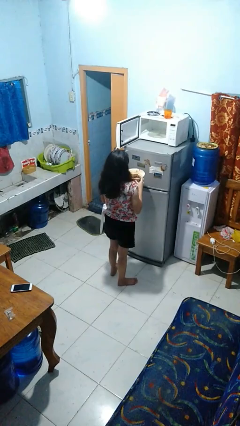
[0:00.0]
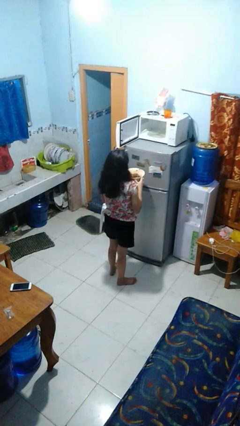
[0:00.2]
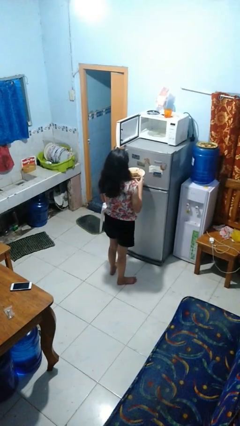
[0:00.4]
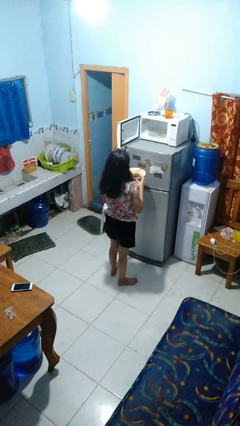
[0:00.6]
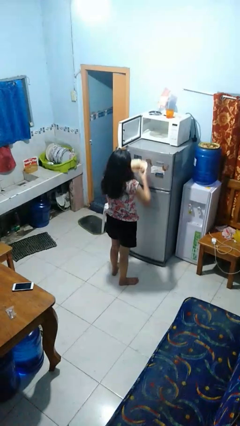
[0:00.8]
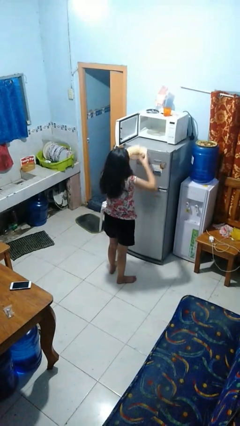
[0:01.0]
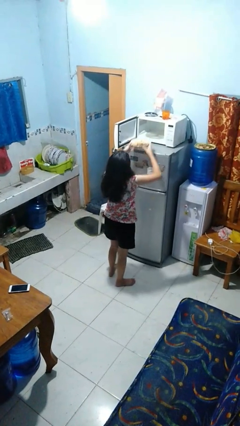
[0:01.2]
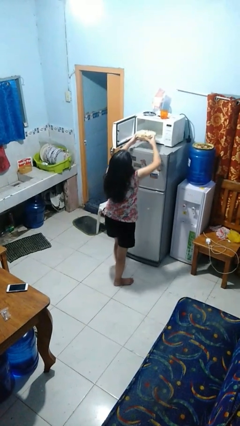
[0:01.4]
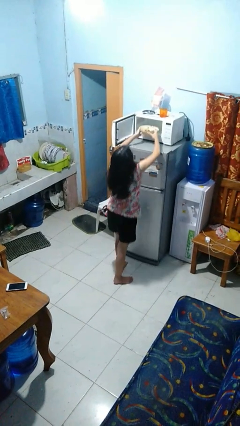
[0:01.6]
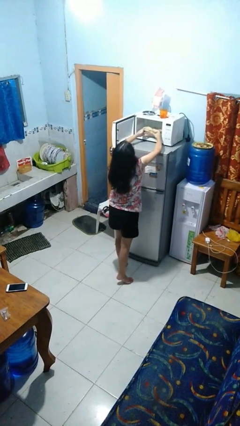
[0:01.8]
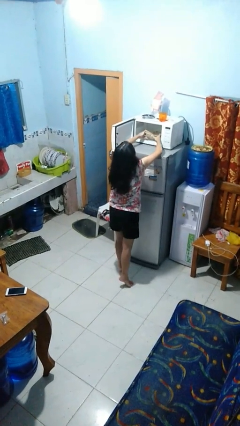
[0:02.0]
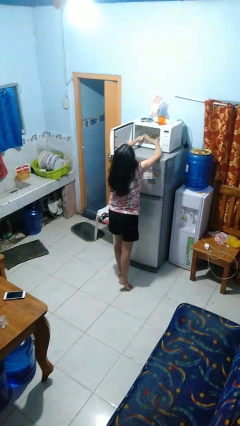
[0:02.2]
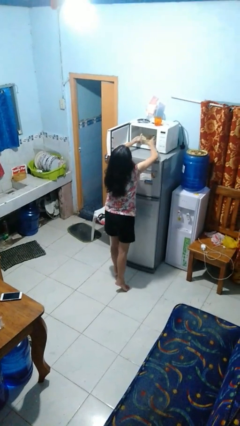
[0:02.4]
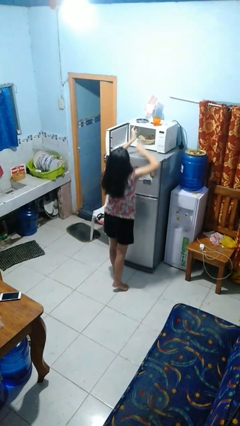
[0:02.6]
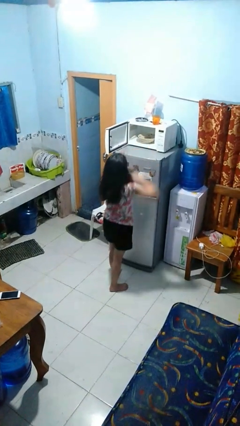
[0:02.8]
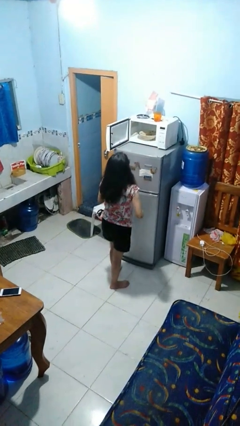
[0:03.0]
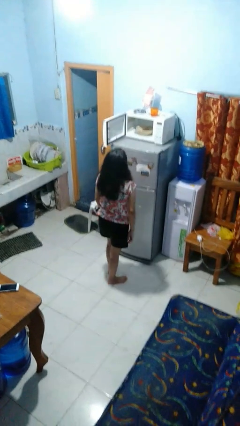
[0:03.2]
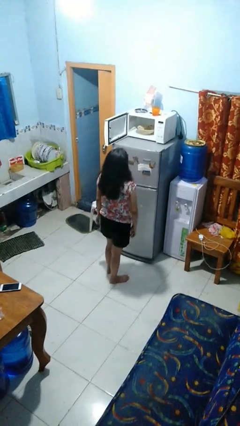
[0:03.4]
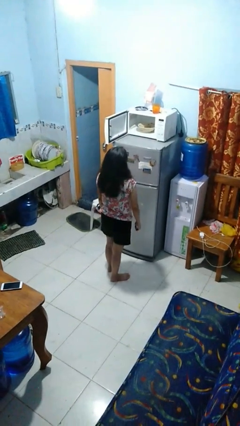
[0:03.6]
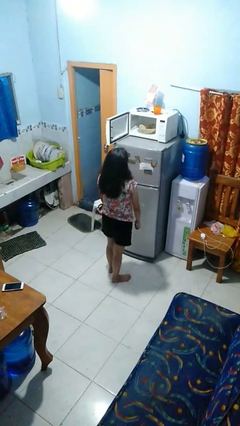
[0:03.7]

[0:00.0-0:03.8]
person puts object into microwave

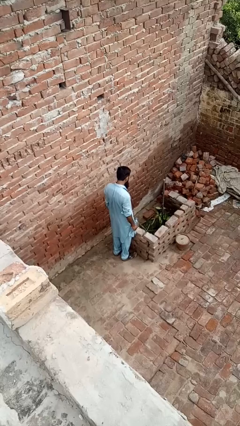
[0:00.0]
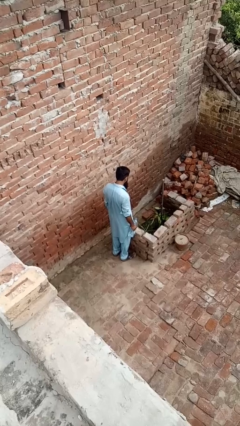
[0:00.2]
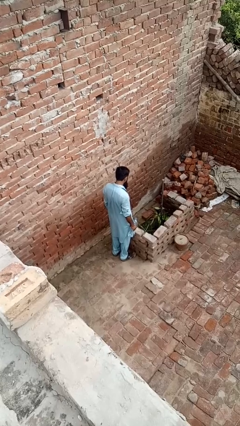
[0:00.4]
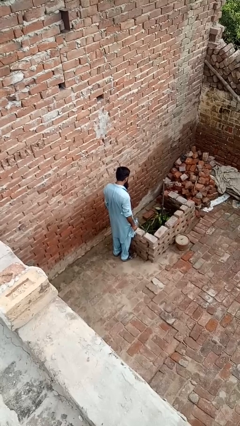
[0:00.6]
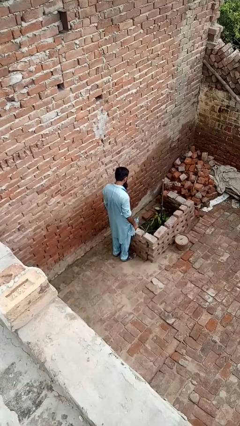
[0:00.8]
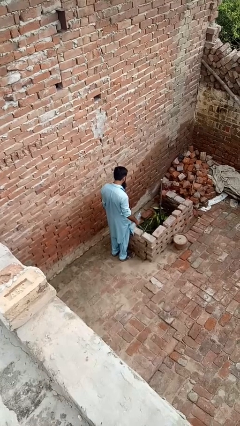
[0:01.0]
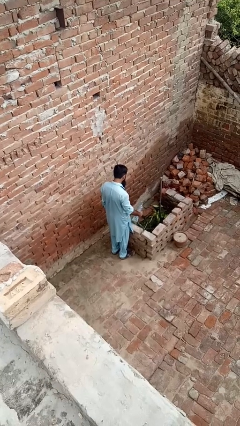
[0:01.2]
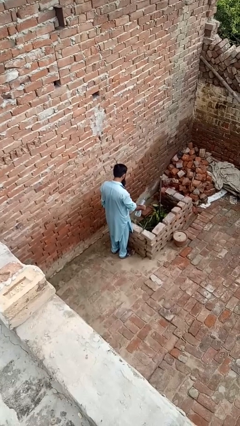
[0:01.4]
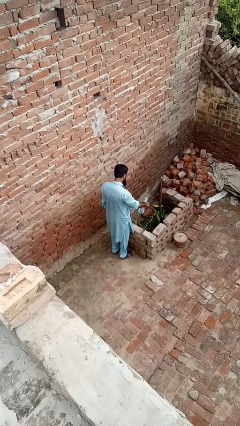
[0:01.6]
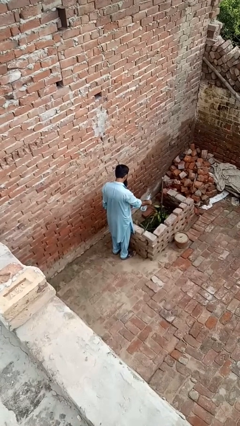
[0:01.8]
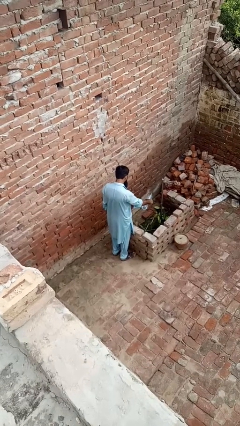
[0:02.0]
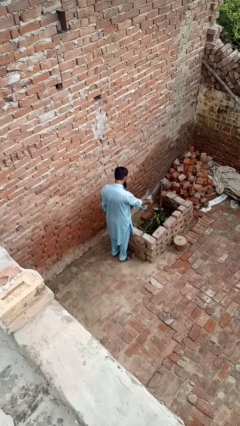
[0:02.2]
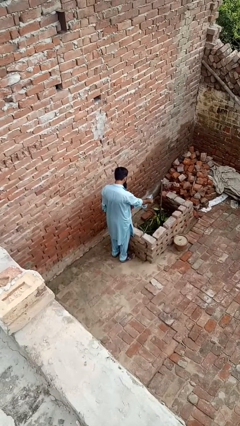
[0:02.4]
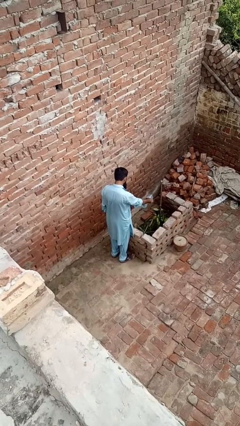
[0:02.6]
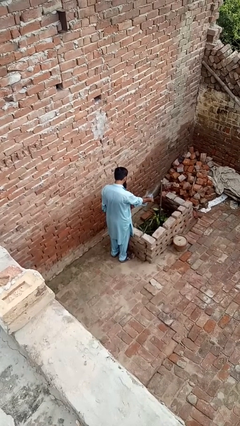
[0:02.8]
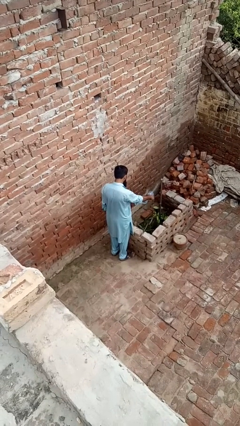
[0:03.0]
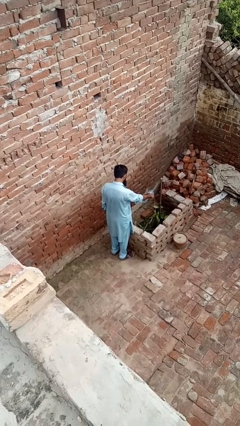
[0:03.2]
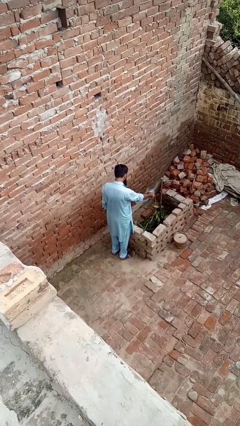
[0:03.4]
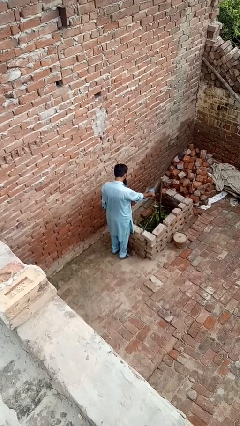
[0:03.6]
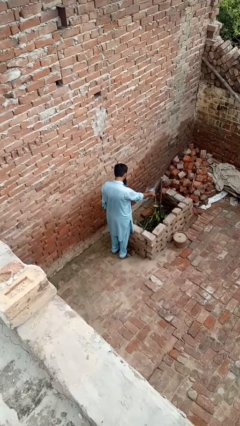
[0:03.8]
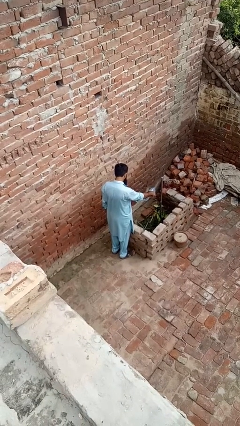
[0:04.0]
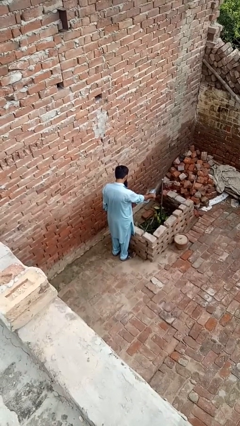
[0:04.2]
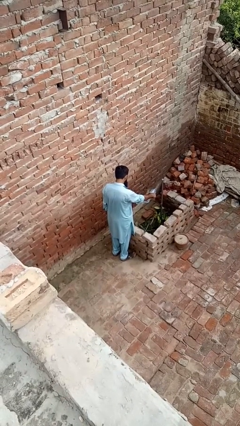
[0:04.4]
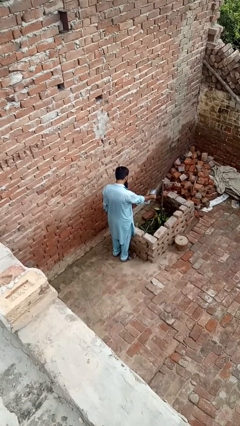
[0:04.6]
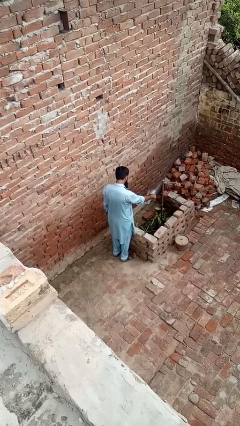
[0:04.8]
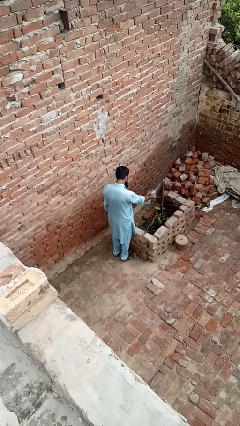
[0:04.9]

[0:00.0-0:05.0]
person waters houseplant

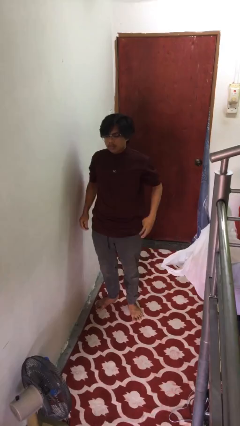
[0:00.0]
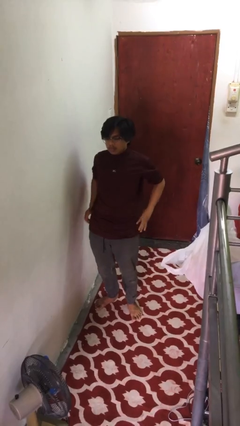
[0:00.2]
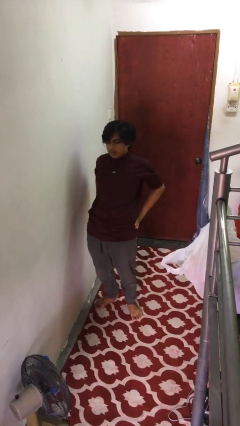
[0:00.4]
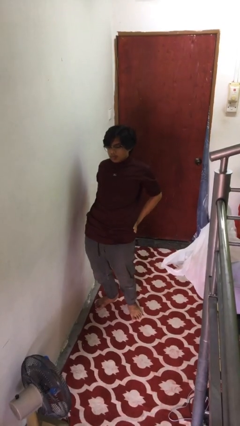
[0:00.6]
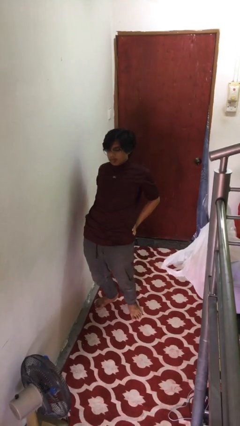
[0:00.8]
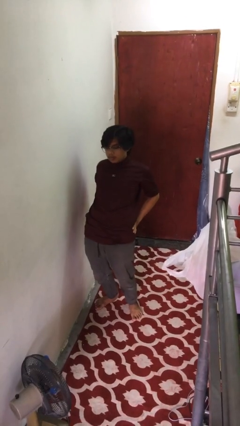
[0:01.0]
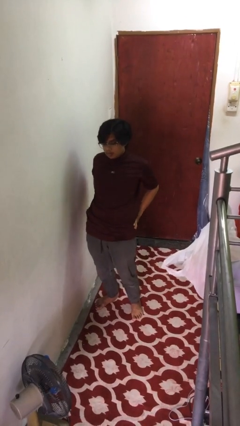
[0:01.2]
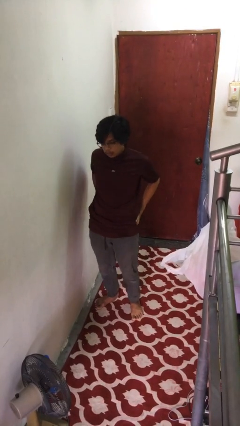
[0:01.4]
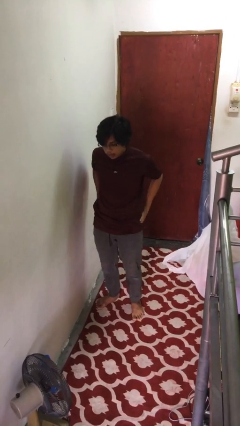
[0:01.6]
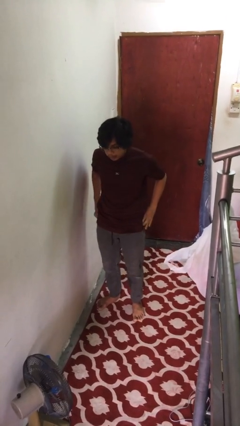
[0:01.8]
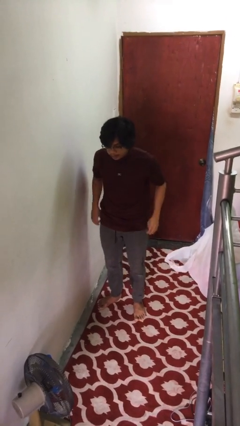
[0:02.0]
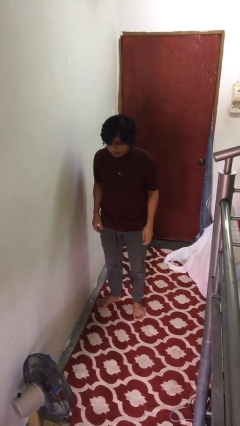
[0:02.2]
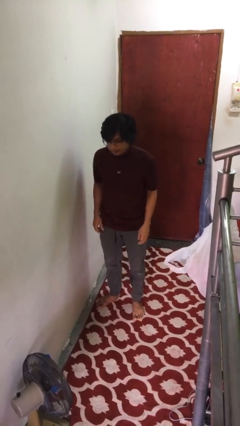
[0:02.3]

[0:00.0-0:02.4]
person stretches back

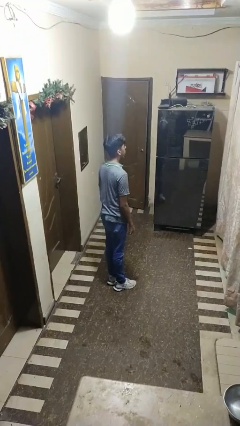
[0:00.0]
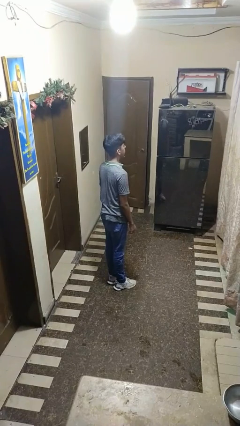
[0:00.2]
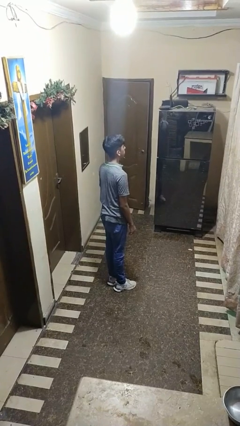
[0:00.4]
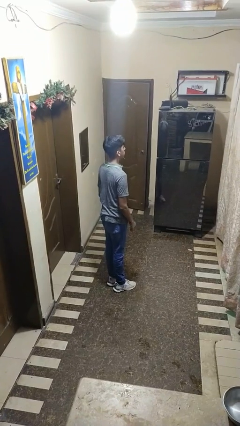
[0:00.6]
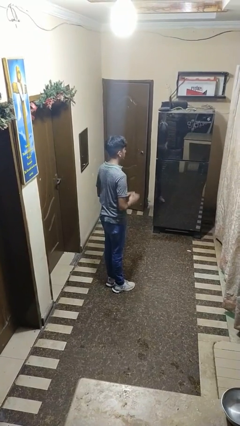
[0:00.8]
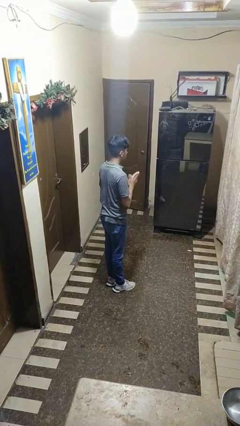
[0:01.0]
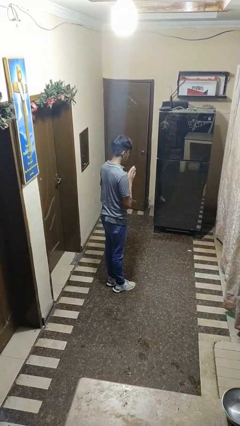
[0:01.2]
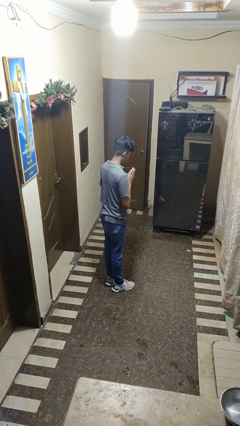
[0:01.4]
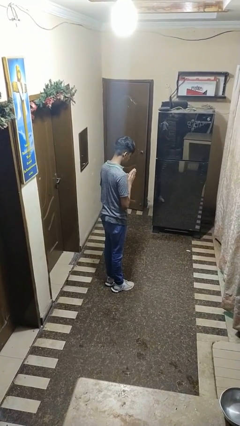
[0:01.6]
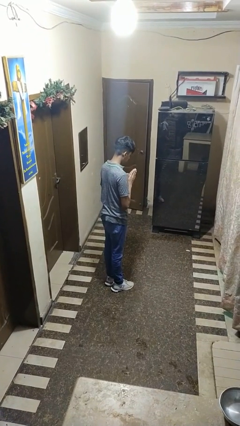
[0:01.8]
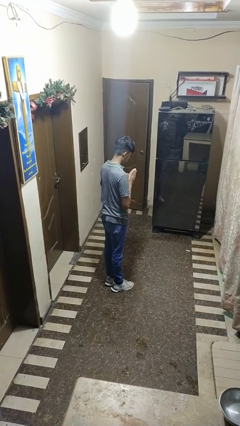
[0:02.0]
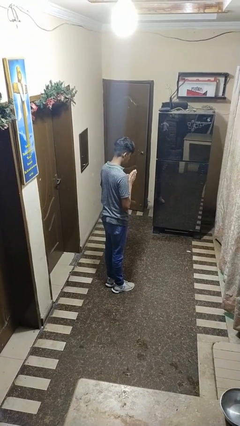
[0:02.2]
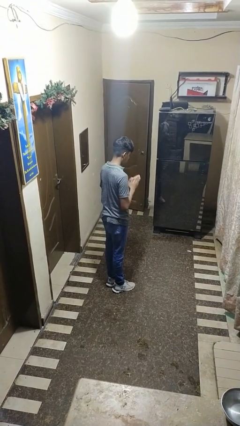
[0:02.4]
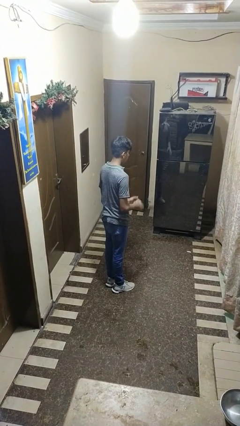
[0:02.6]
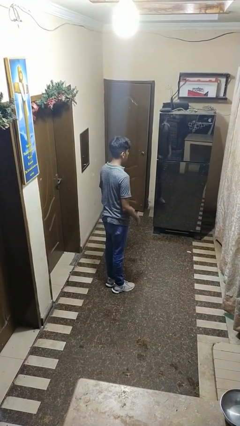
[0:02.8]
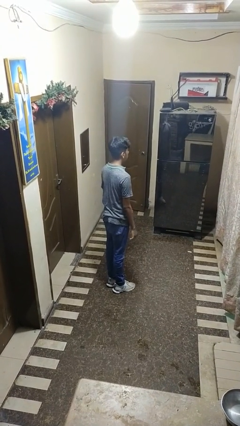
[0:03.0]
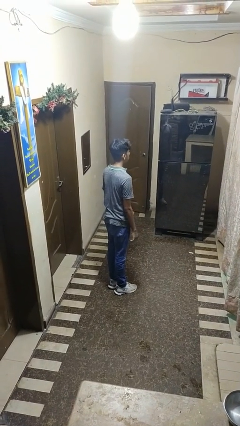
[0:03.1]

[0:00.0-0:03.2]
person prays

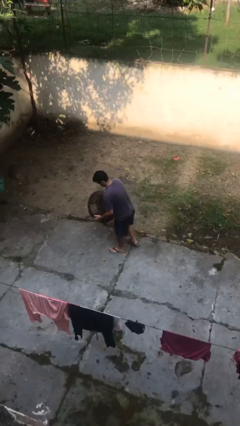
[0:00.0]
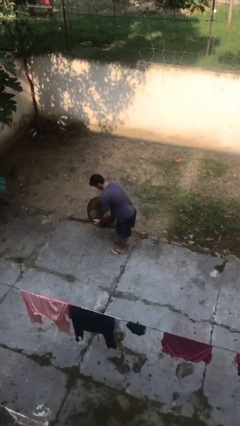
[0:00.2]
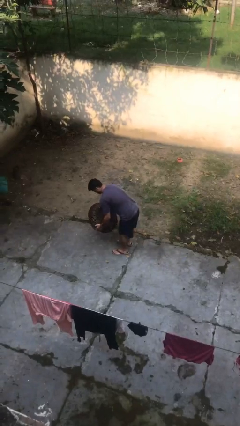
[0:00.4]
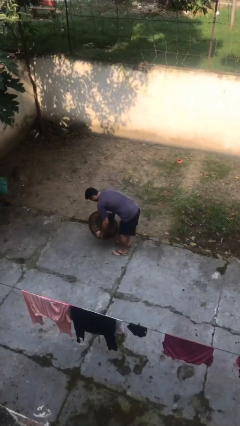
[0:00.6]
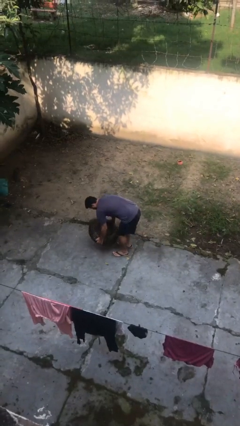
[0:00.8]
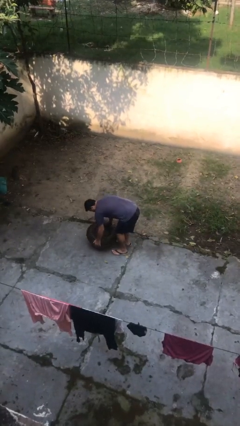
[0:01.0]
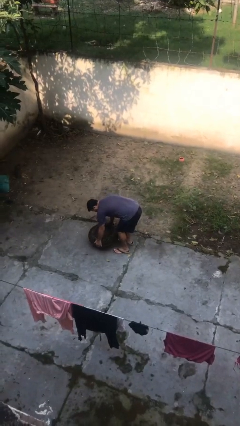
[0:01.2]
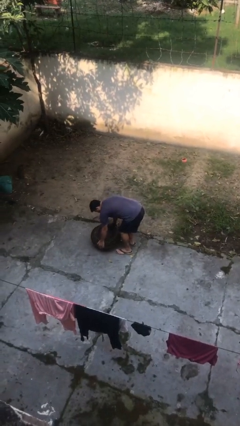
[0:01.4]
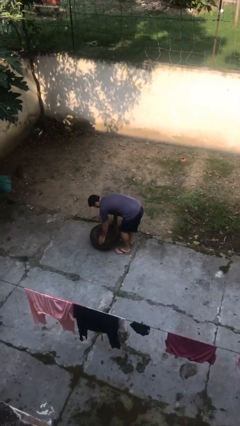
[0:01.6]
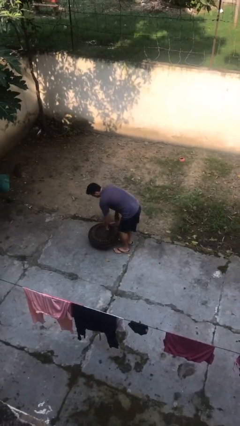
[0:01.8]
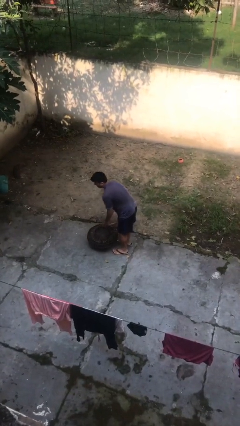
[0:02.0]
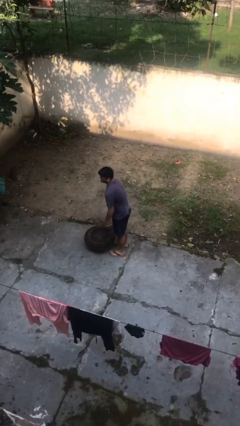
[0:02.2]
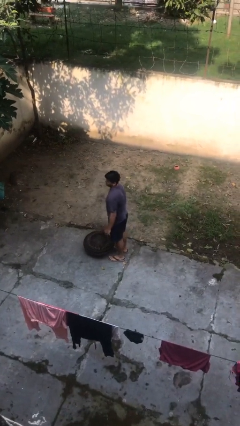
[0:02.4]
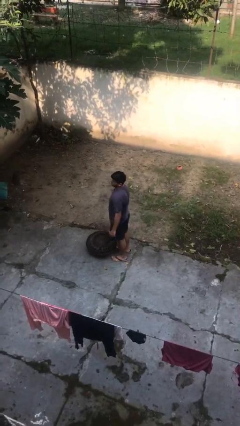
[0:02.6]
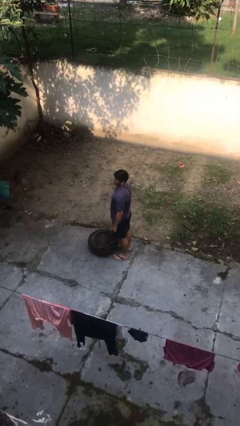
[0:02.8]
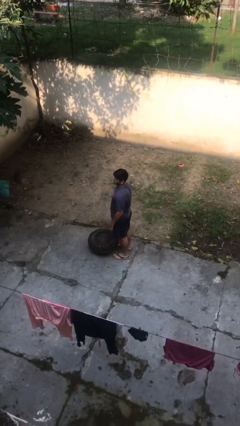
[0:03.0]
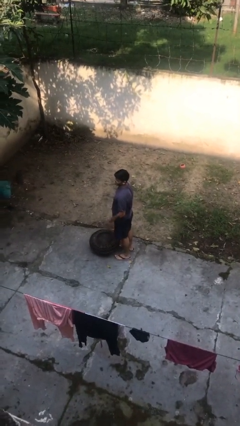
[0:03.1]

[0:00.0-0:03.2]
person puts down object on floor
